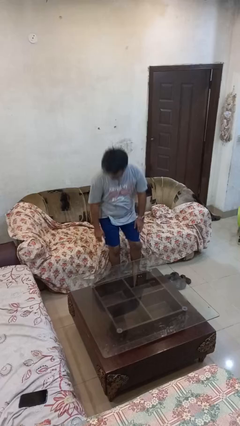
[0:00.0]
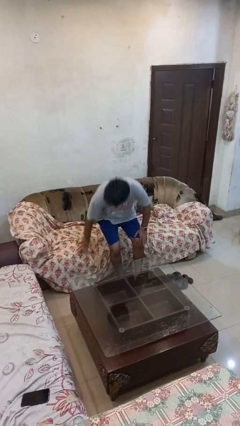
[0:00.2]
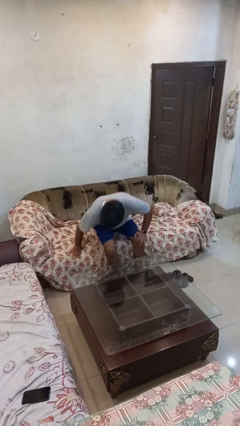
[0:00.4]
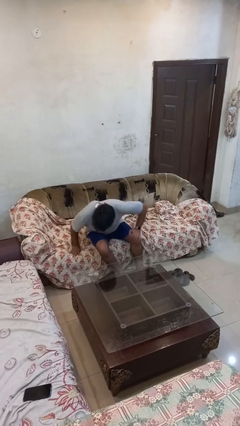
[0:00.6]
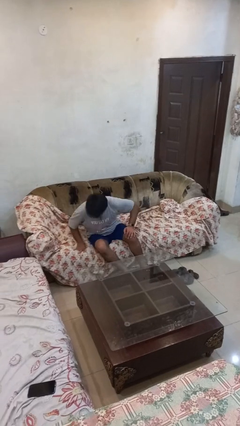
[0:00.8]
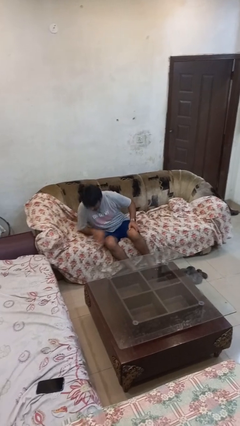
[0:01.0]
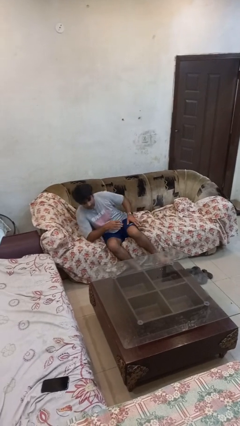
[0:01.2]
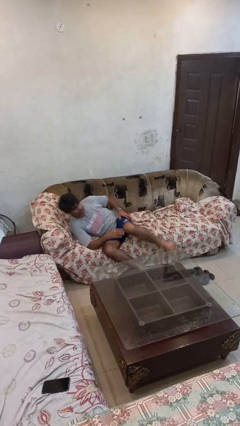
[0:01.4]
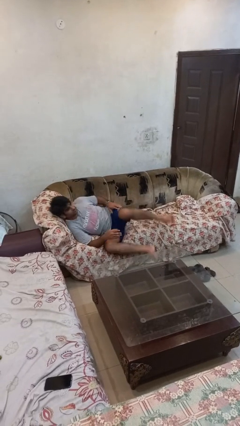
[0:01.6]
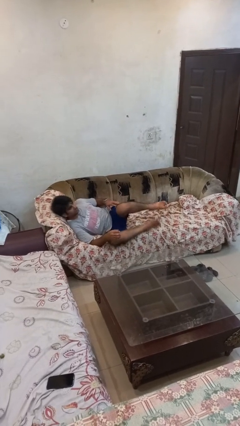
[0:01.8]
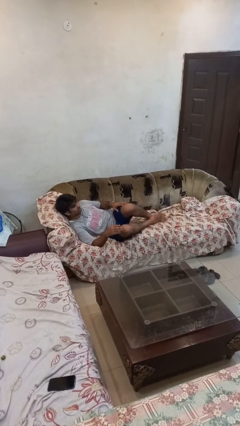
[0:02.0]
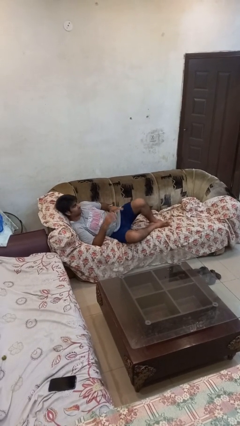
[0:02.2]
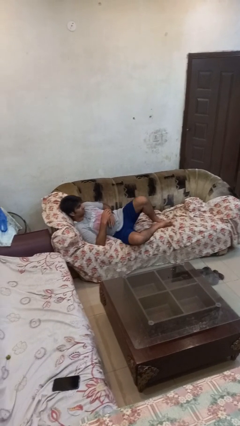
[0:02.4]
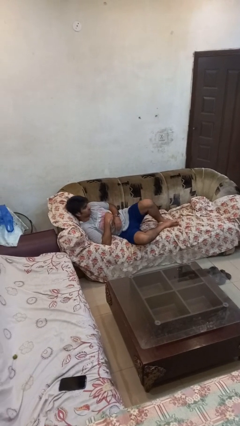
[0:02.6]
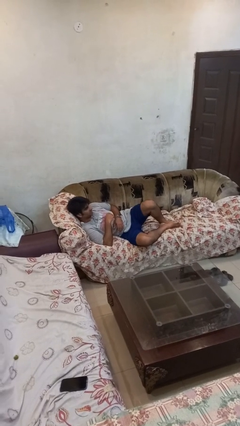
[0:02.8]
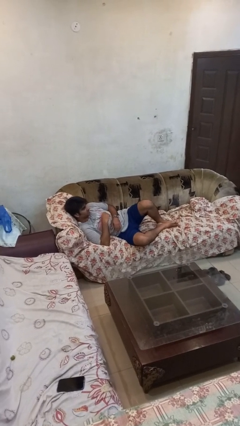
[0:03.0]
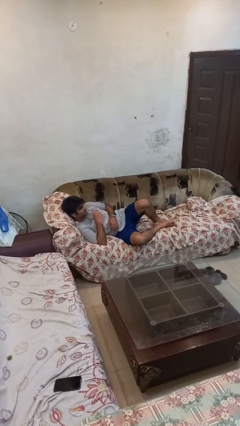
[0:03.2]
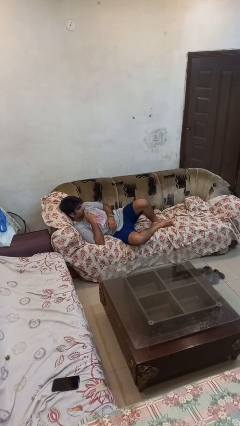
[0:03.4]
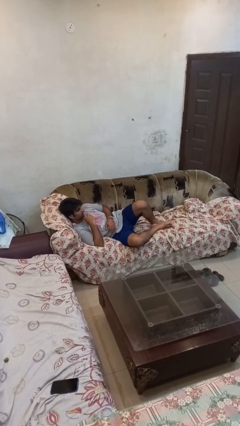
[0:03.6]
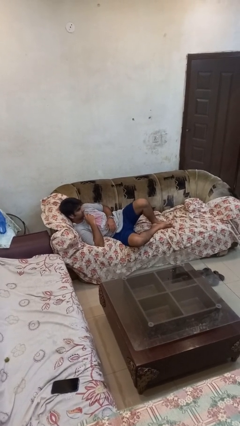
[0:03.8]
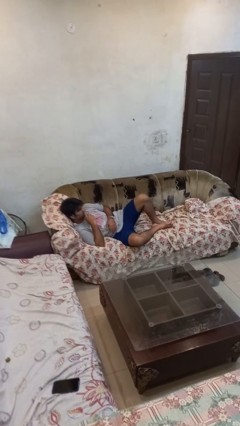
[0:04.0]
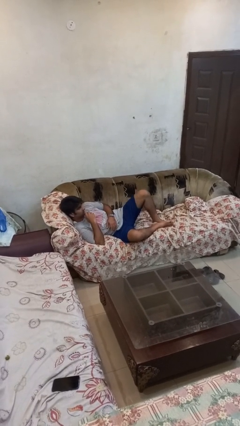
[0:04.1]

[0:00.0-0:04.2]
person lies down on couch

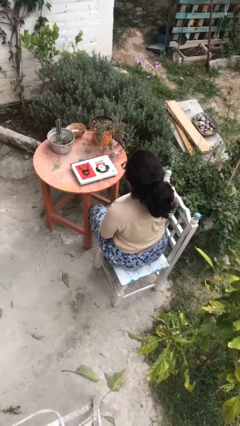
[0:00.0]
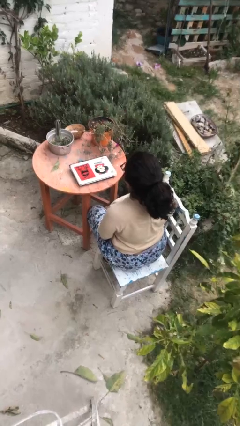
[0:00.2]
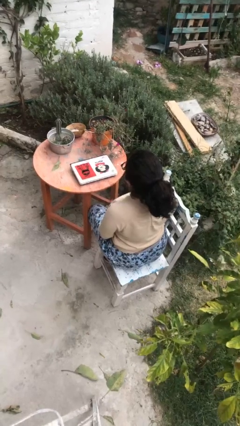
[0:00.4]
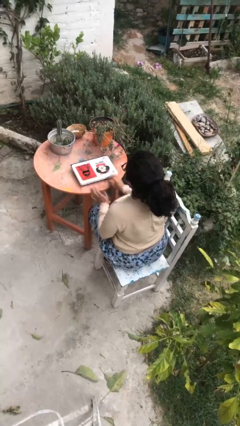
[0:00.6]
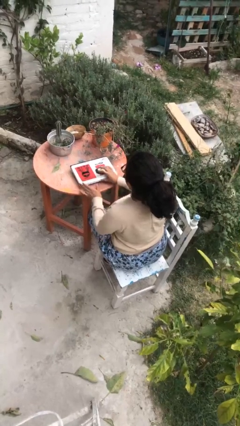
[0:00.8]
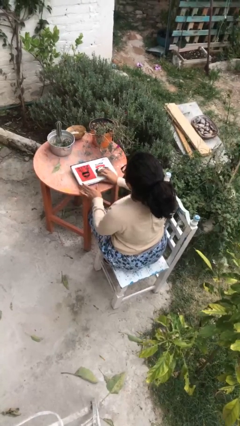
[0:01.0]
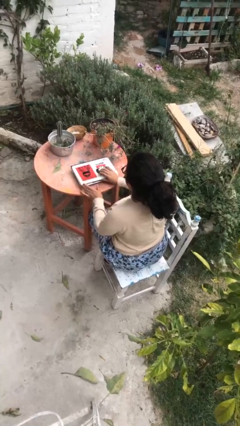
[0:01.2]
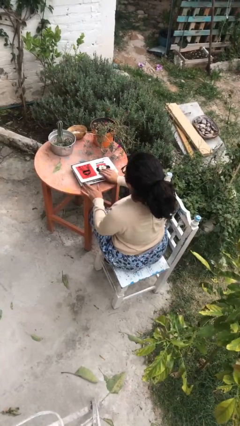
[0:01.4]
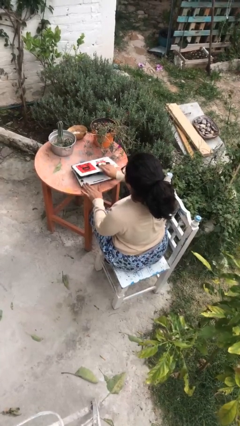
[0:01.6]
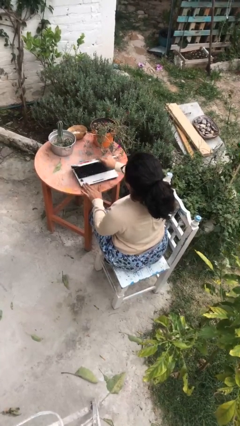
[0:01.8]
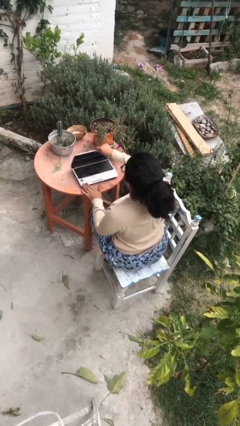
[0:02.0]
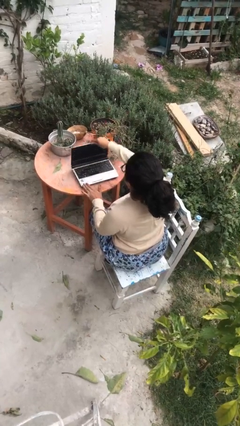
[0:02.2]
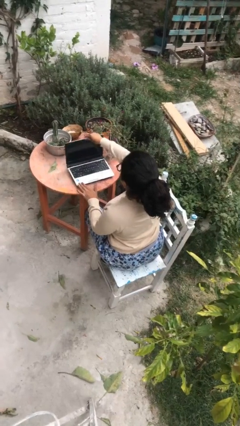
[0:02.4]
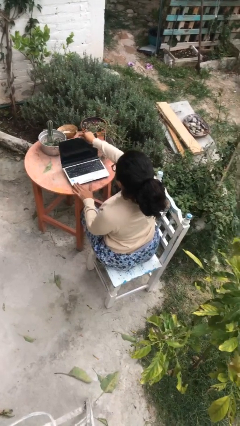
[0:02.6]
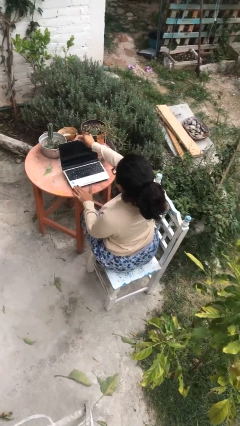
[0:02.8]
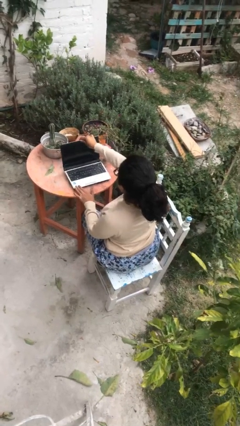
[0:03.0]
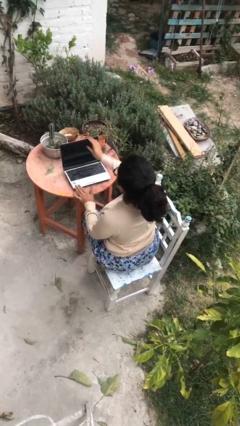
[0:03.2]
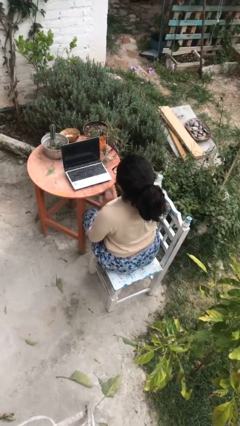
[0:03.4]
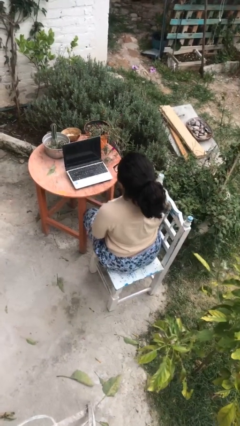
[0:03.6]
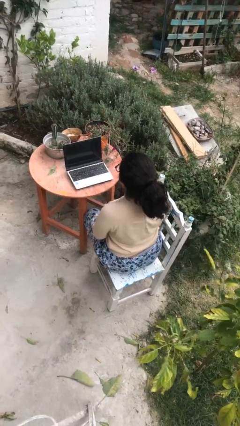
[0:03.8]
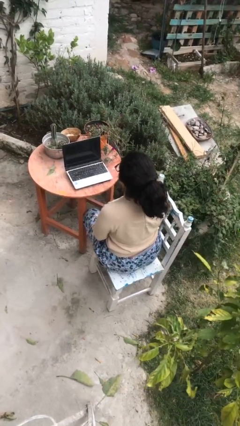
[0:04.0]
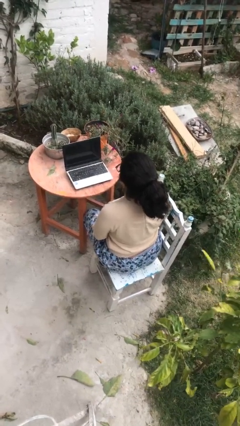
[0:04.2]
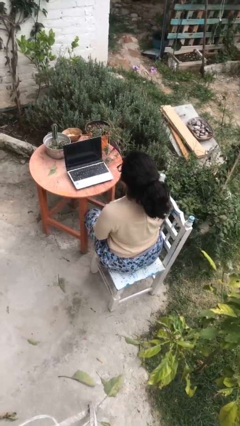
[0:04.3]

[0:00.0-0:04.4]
person opens laptop

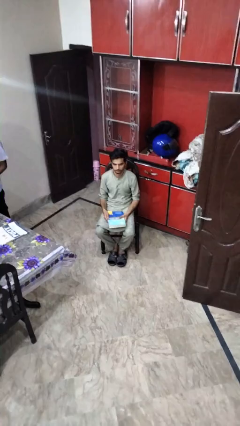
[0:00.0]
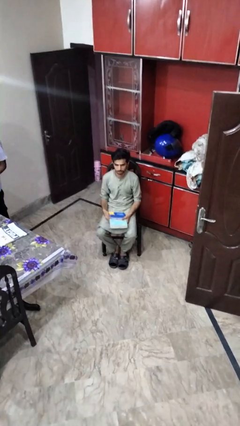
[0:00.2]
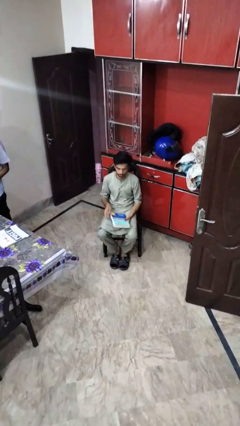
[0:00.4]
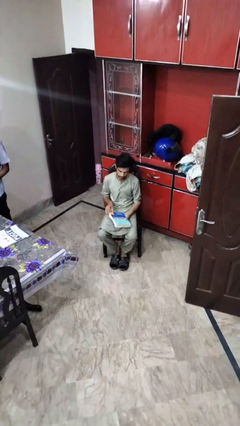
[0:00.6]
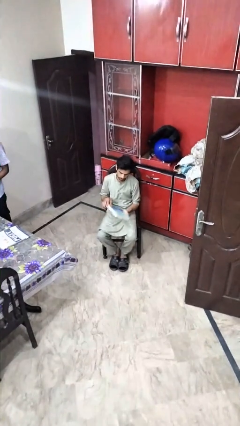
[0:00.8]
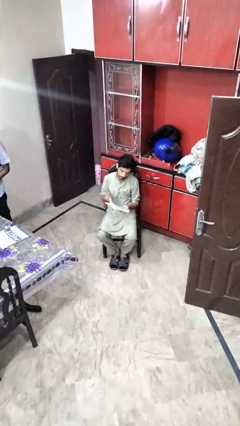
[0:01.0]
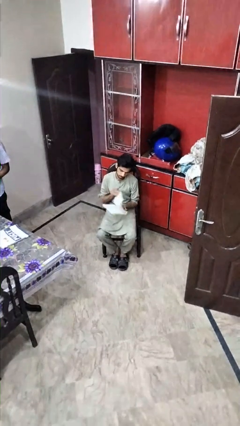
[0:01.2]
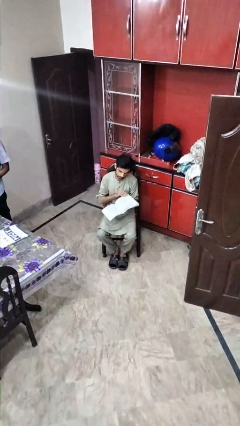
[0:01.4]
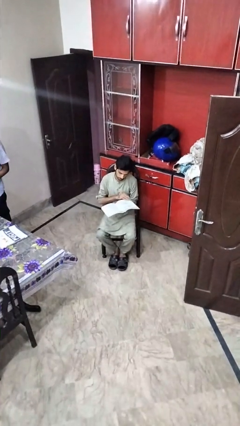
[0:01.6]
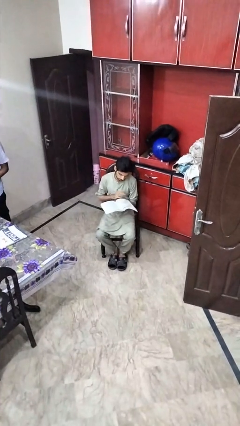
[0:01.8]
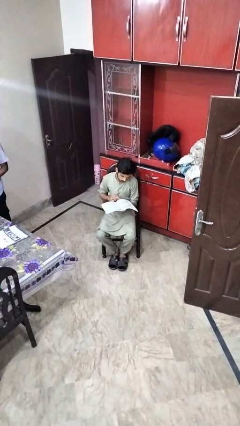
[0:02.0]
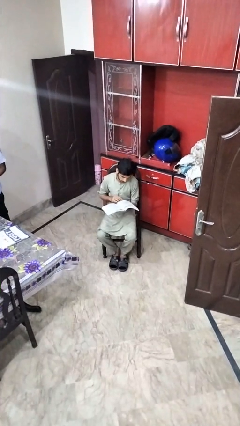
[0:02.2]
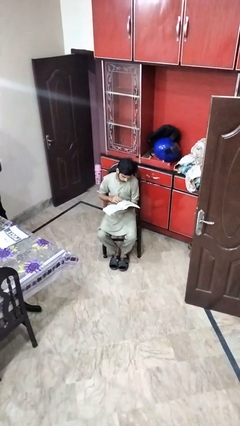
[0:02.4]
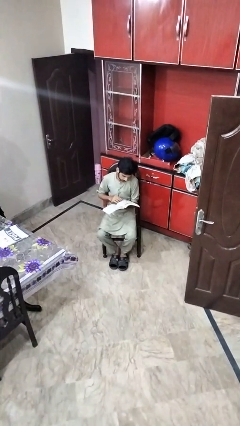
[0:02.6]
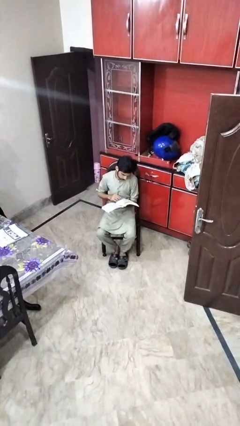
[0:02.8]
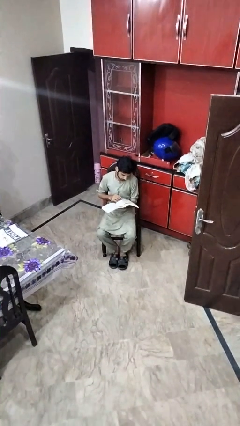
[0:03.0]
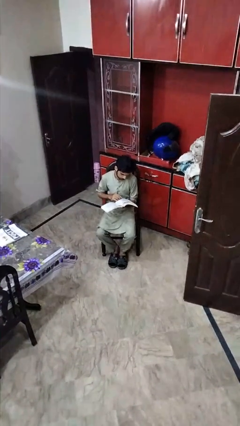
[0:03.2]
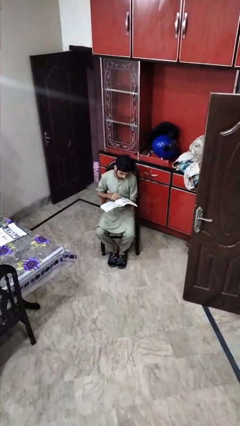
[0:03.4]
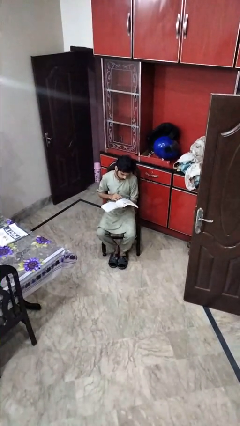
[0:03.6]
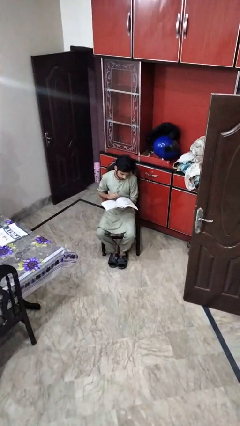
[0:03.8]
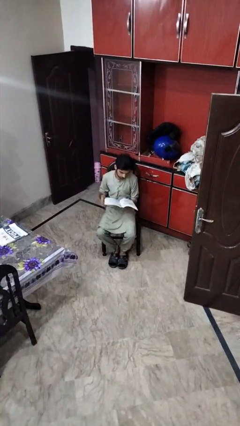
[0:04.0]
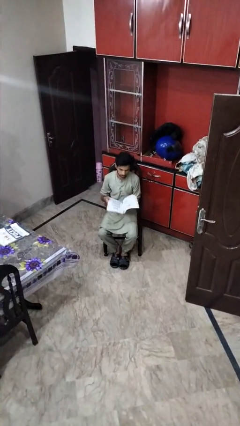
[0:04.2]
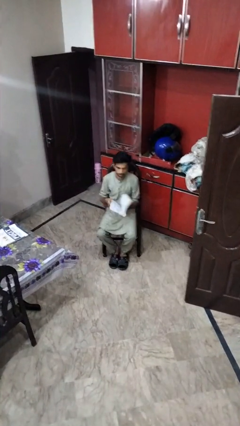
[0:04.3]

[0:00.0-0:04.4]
person reads book

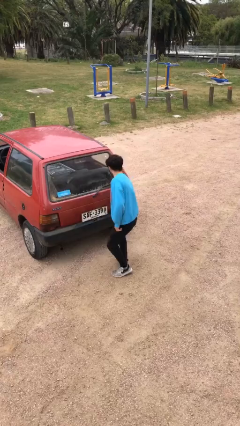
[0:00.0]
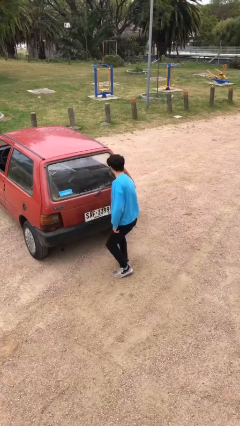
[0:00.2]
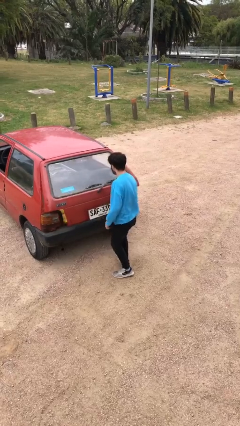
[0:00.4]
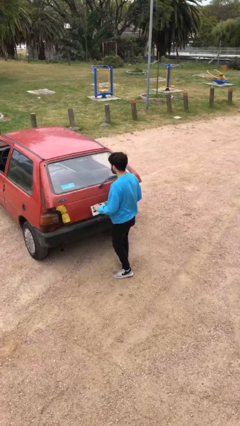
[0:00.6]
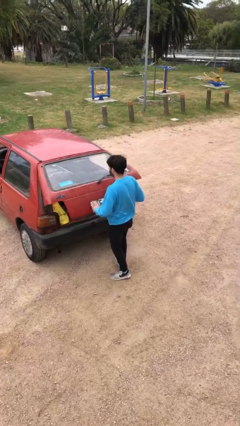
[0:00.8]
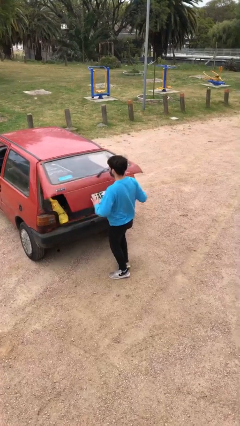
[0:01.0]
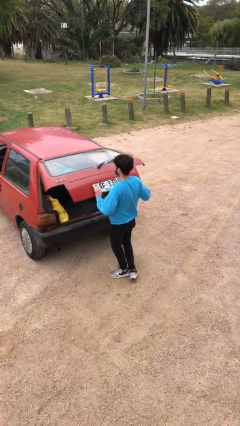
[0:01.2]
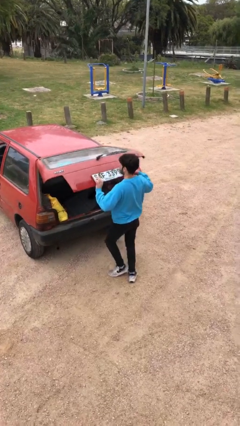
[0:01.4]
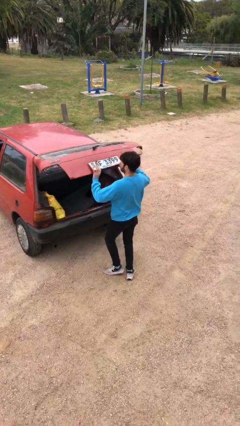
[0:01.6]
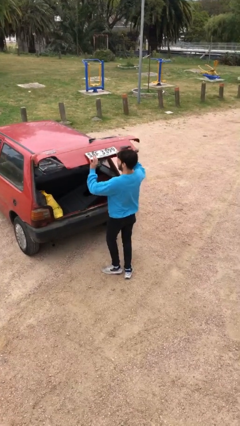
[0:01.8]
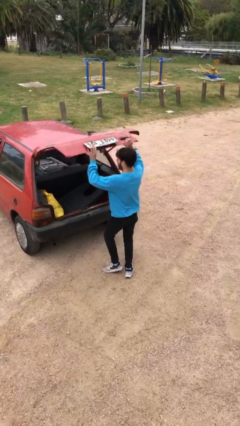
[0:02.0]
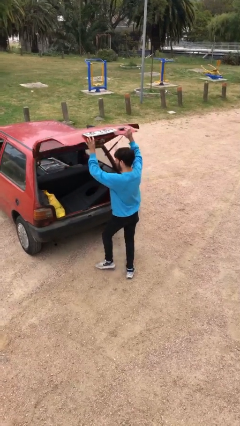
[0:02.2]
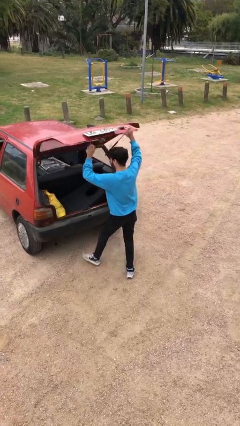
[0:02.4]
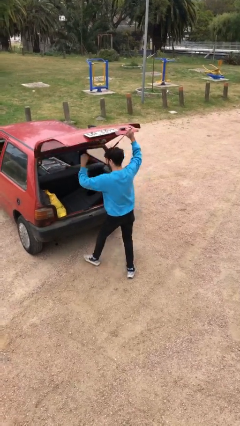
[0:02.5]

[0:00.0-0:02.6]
person opens car trunk

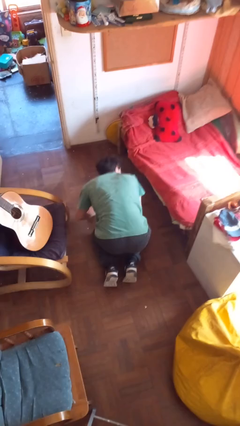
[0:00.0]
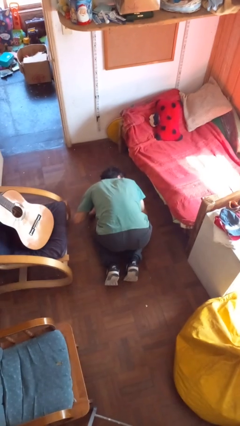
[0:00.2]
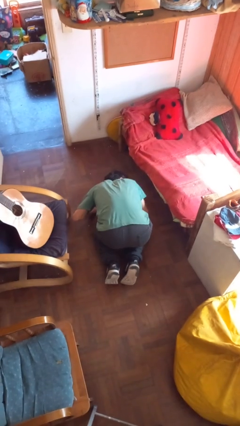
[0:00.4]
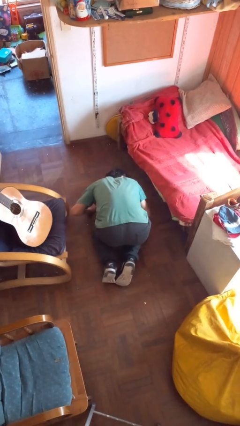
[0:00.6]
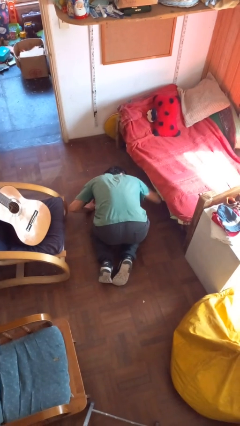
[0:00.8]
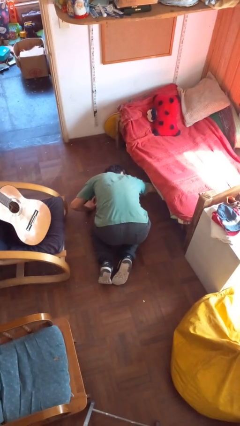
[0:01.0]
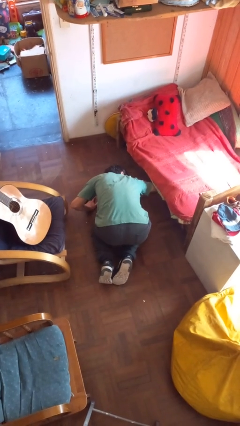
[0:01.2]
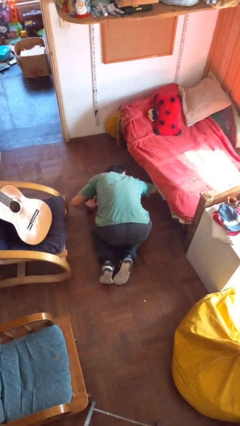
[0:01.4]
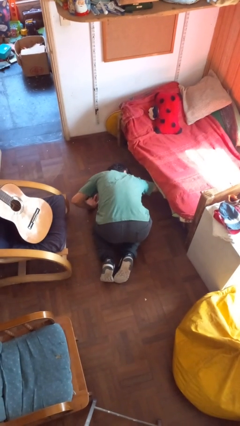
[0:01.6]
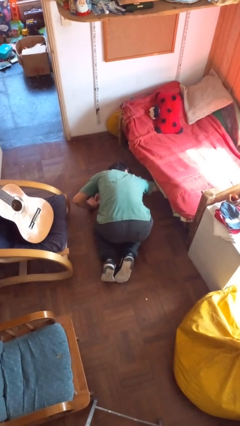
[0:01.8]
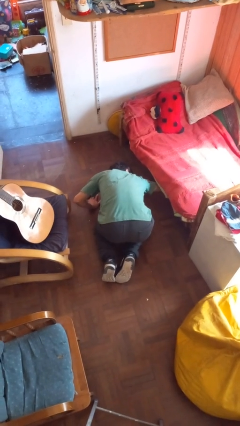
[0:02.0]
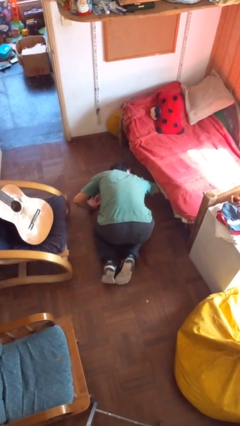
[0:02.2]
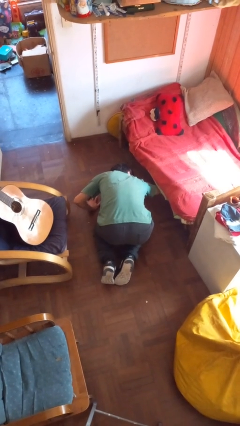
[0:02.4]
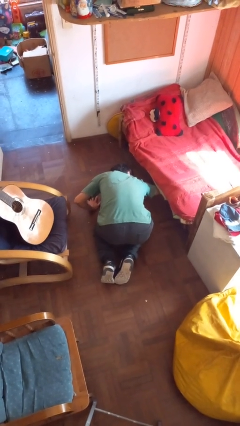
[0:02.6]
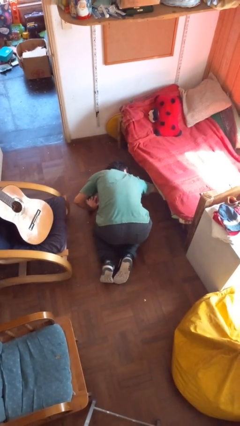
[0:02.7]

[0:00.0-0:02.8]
person searches under bed
